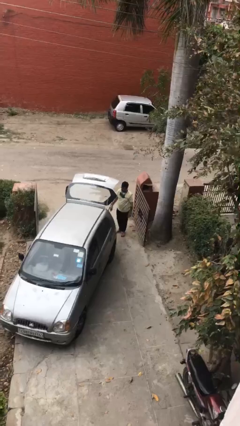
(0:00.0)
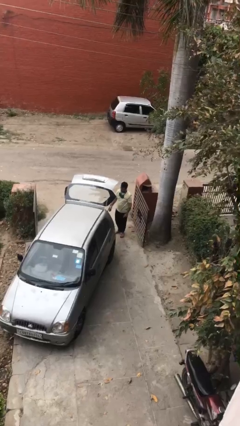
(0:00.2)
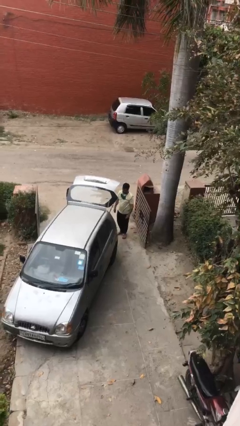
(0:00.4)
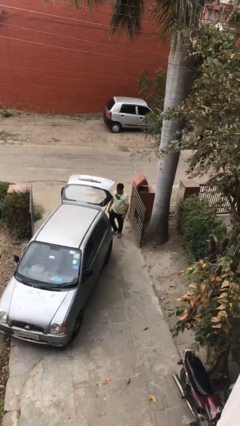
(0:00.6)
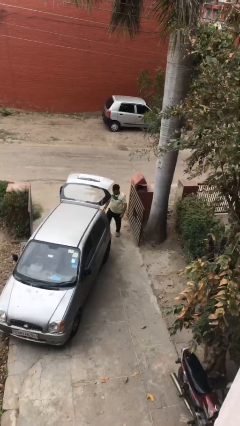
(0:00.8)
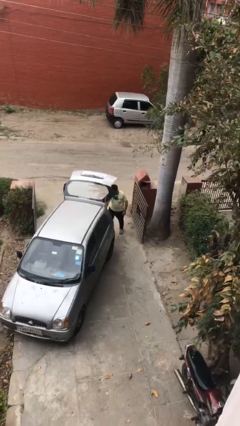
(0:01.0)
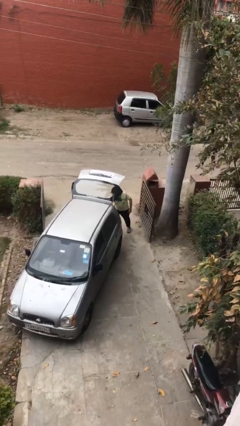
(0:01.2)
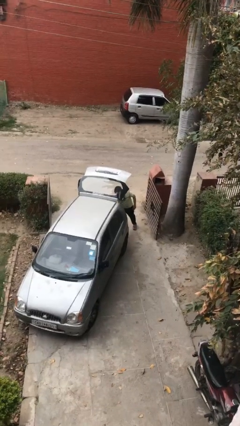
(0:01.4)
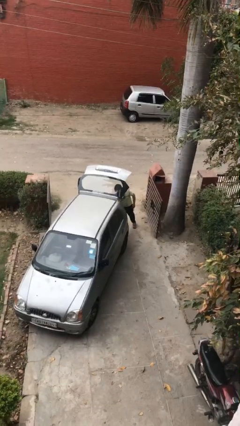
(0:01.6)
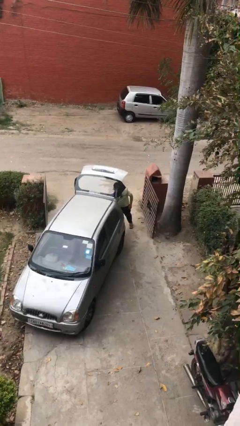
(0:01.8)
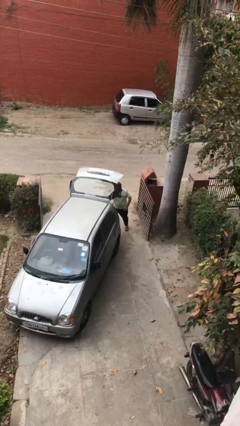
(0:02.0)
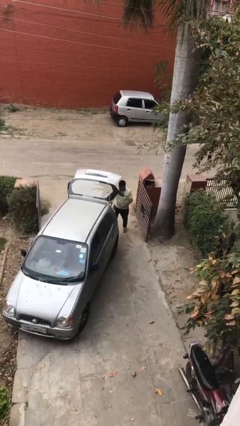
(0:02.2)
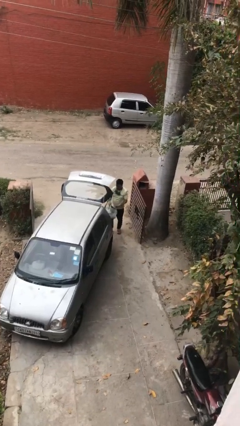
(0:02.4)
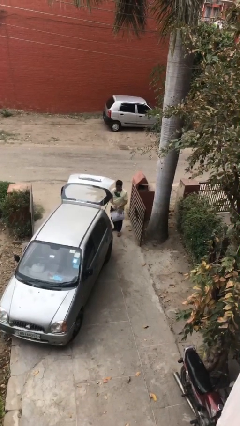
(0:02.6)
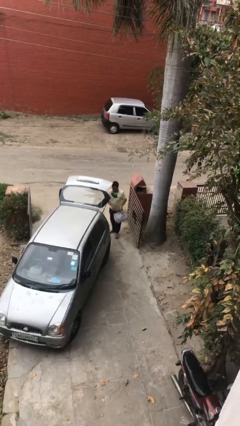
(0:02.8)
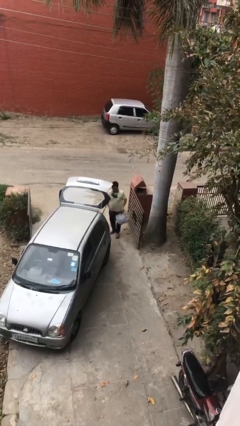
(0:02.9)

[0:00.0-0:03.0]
person unloads car

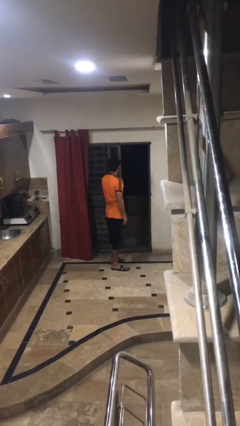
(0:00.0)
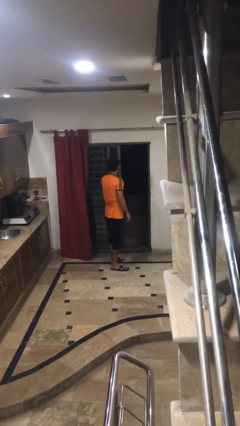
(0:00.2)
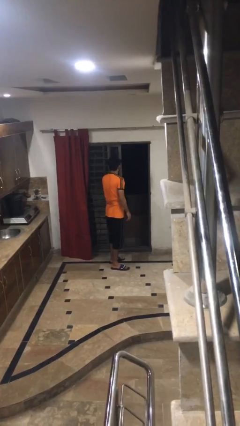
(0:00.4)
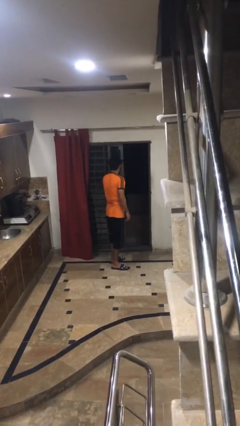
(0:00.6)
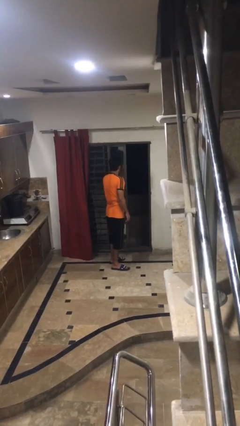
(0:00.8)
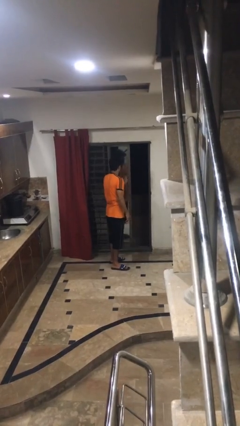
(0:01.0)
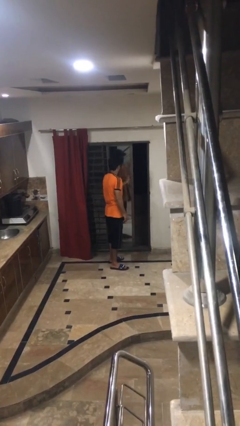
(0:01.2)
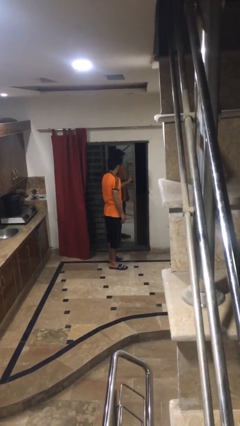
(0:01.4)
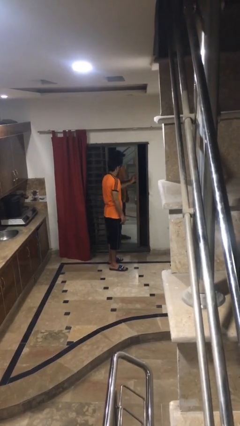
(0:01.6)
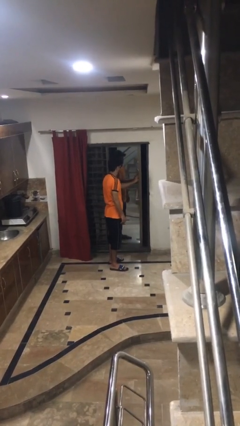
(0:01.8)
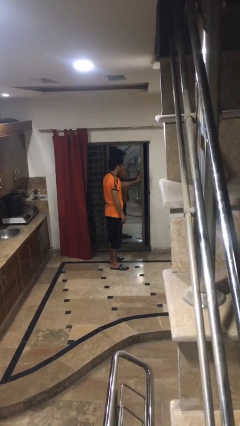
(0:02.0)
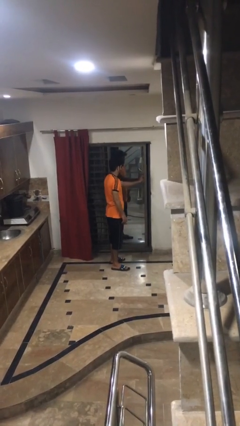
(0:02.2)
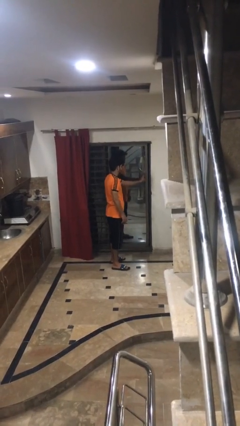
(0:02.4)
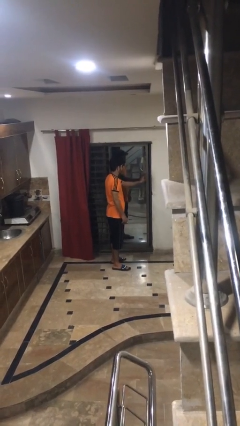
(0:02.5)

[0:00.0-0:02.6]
person closes sliding door

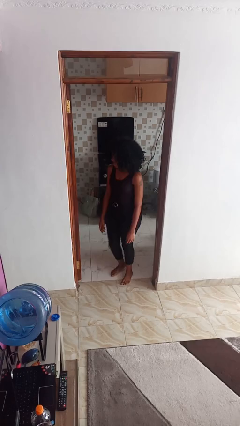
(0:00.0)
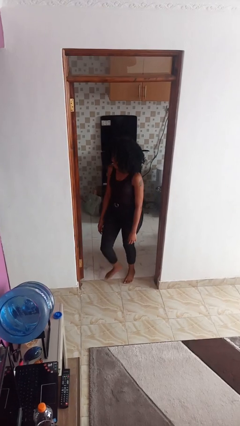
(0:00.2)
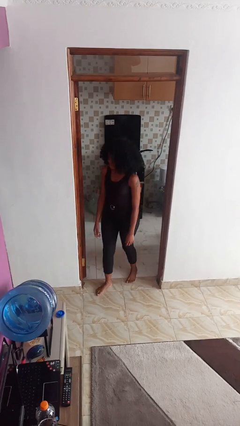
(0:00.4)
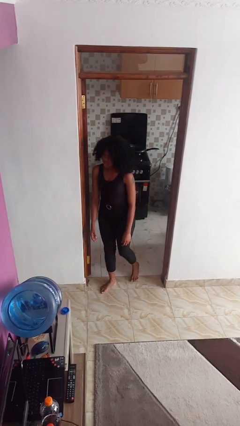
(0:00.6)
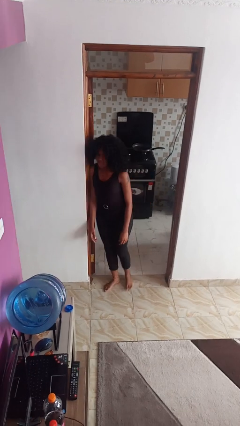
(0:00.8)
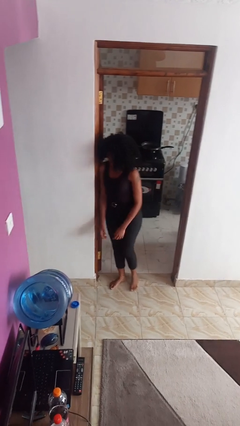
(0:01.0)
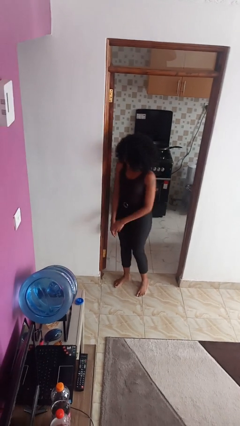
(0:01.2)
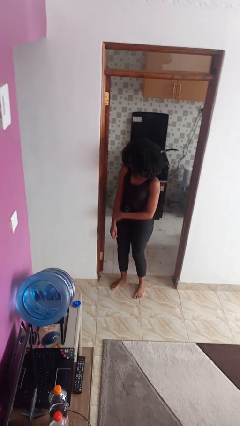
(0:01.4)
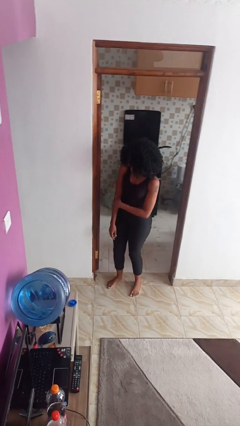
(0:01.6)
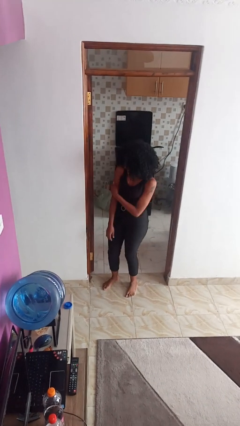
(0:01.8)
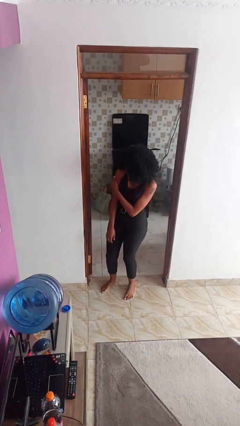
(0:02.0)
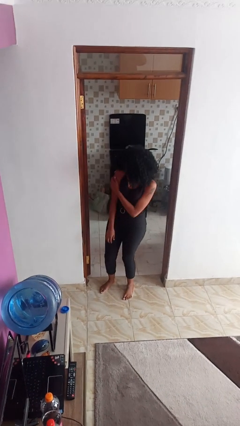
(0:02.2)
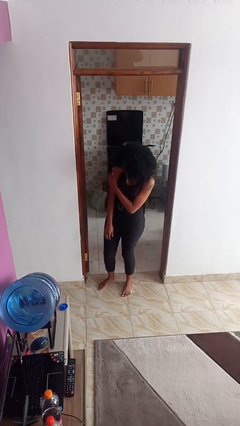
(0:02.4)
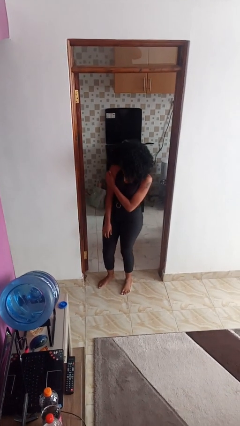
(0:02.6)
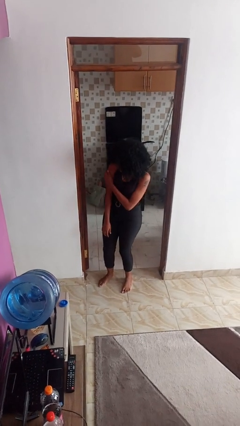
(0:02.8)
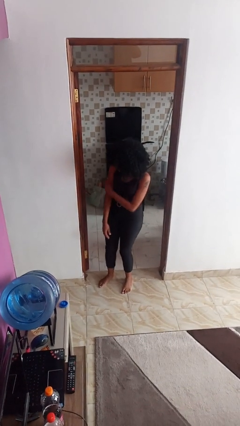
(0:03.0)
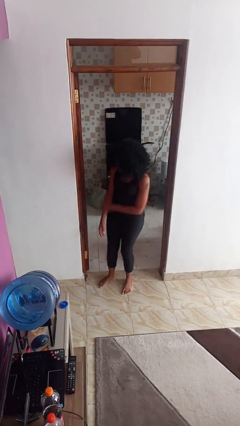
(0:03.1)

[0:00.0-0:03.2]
person bumps into wall

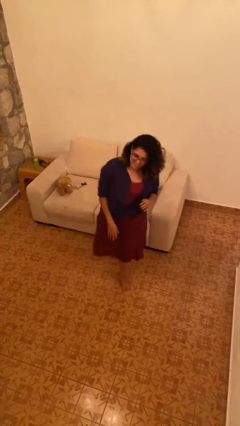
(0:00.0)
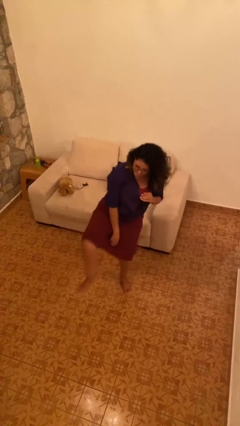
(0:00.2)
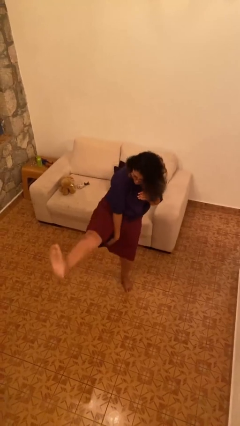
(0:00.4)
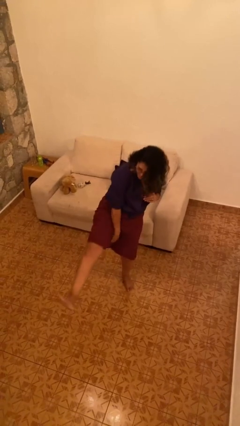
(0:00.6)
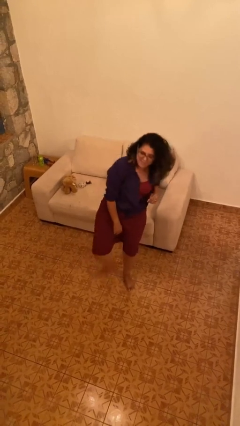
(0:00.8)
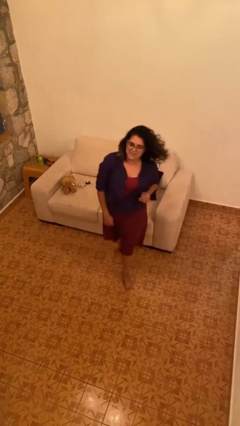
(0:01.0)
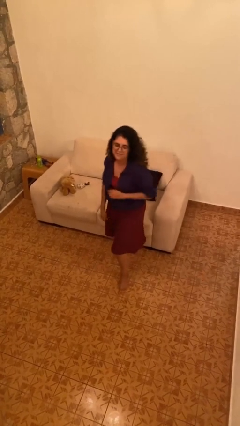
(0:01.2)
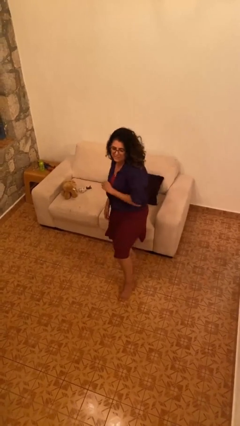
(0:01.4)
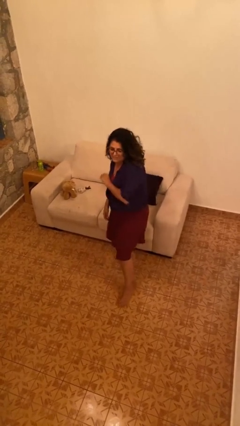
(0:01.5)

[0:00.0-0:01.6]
person karate kicks

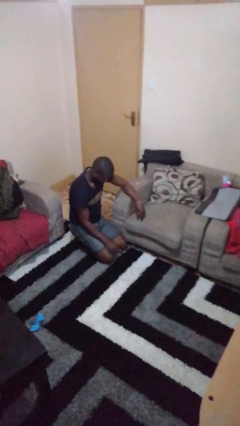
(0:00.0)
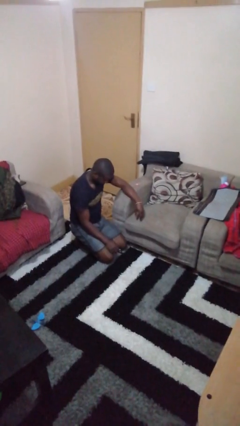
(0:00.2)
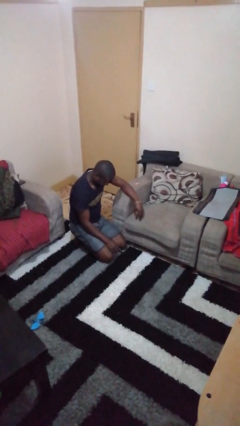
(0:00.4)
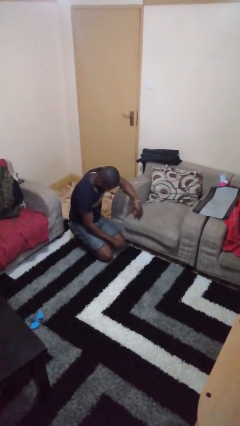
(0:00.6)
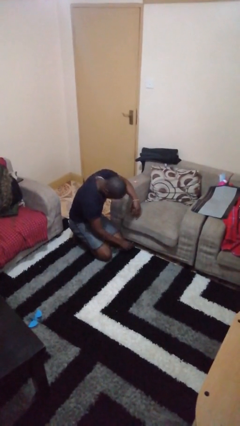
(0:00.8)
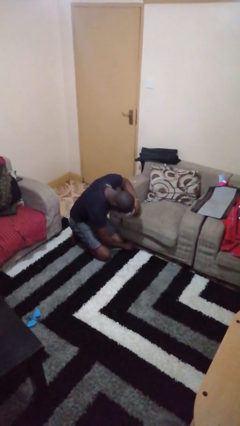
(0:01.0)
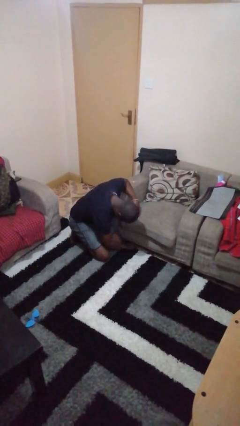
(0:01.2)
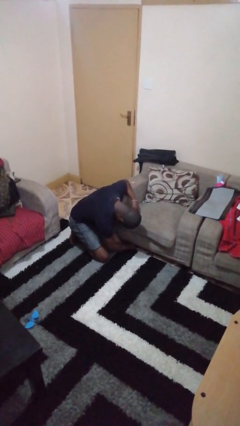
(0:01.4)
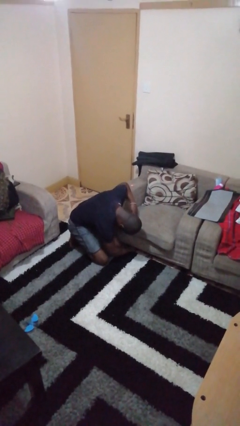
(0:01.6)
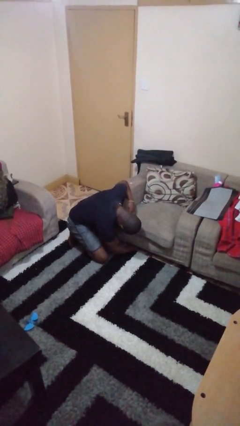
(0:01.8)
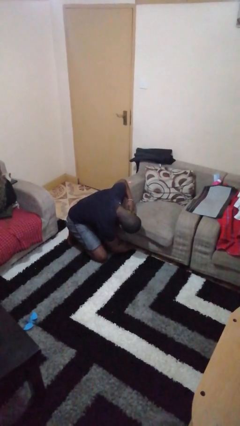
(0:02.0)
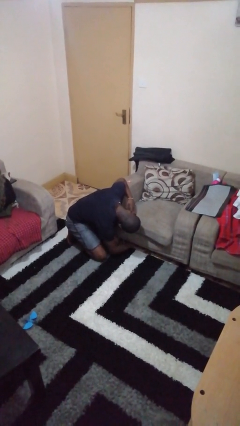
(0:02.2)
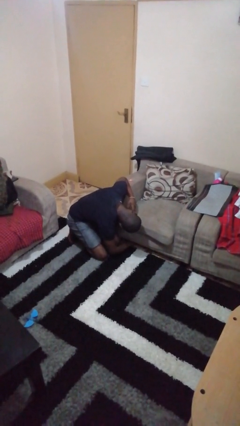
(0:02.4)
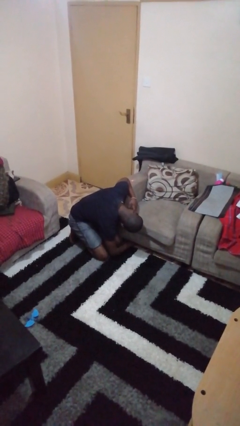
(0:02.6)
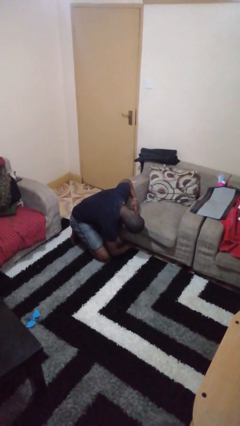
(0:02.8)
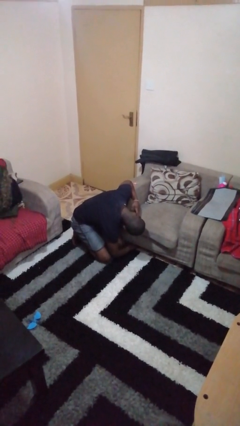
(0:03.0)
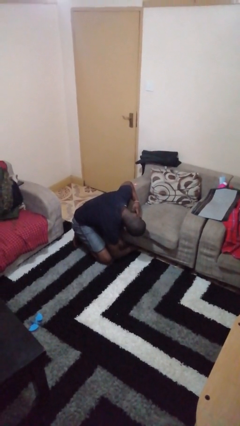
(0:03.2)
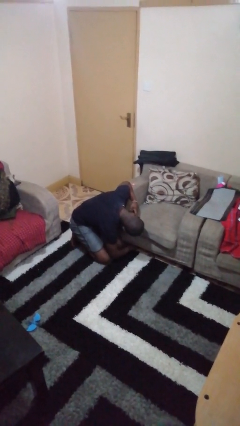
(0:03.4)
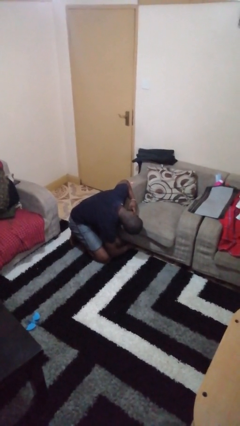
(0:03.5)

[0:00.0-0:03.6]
person searches under couch

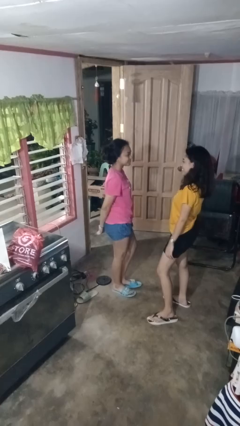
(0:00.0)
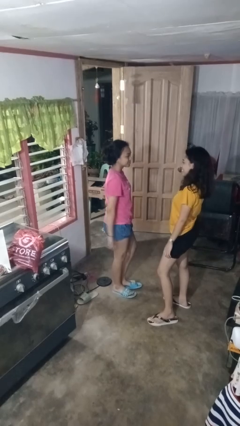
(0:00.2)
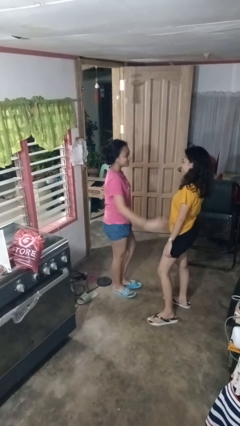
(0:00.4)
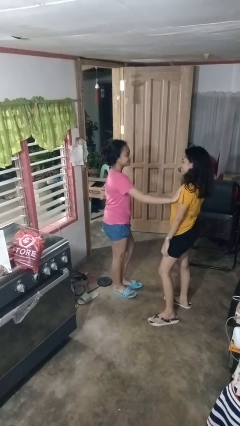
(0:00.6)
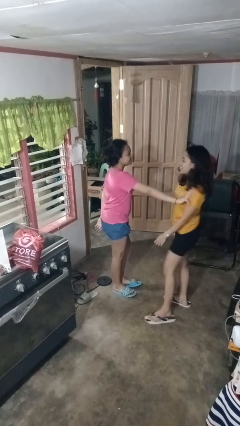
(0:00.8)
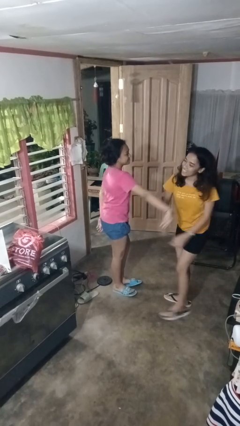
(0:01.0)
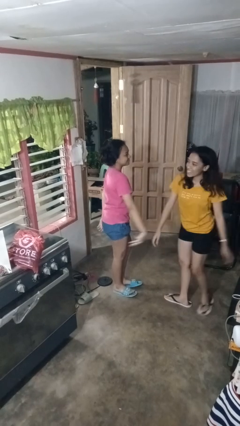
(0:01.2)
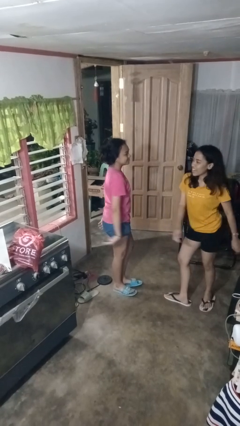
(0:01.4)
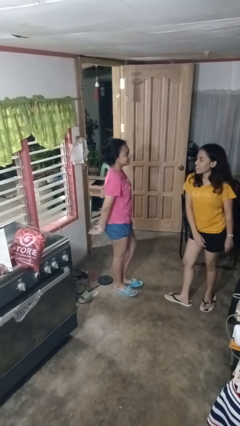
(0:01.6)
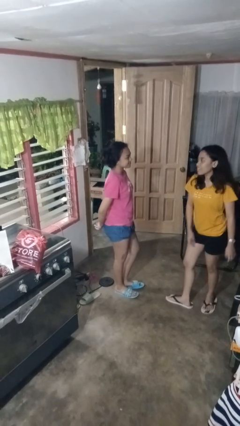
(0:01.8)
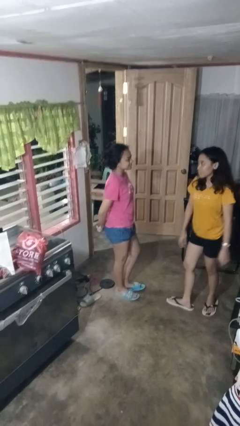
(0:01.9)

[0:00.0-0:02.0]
person shoves person

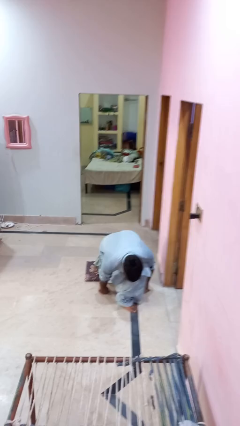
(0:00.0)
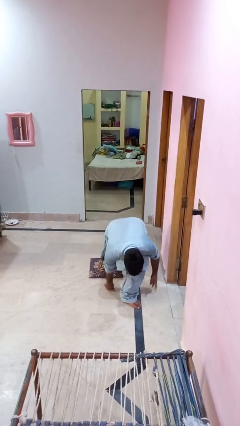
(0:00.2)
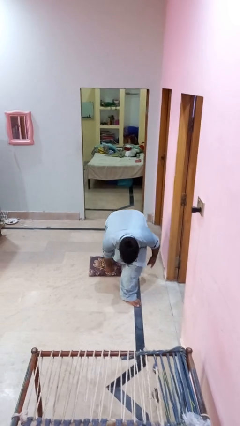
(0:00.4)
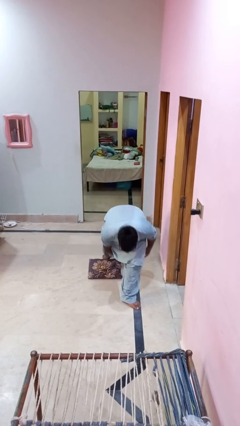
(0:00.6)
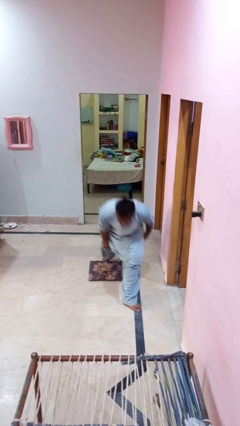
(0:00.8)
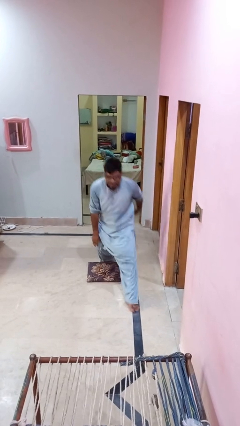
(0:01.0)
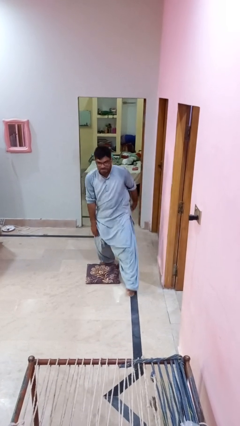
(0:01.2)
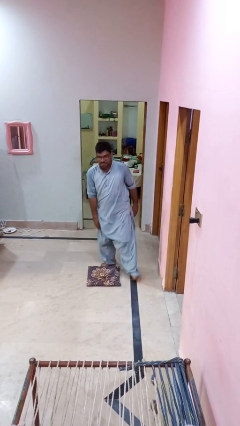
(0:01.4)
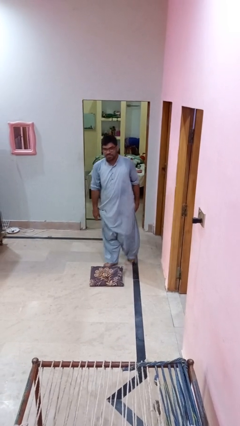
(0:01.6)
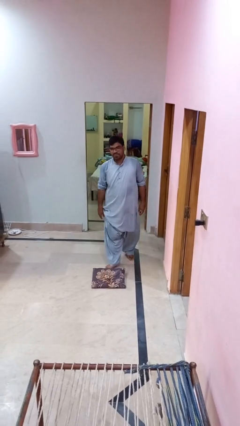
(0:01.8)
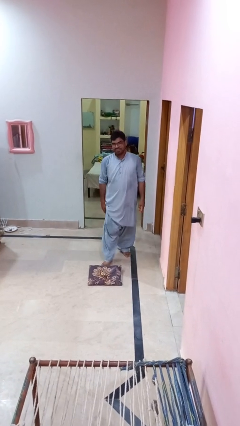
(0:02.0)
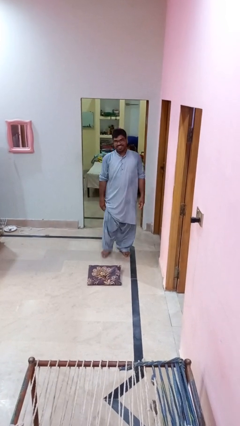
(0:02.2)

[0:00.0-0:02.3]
person stands up from floor
